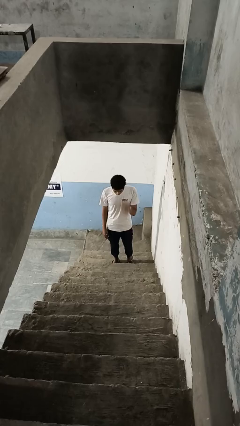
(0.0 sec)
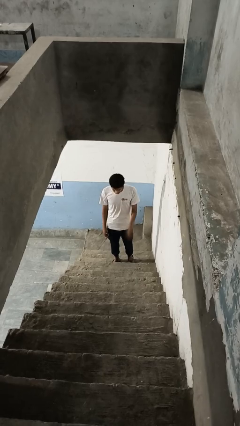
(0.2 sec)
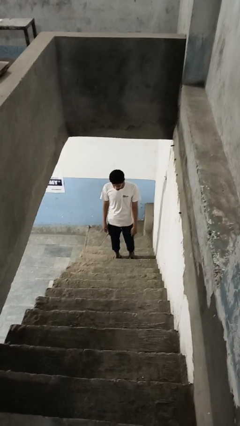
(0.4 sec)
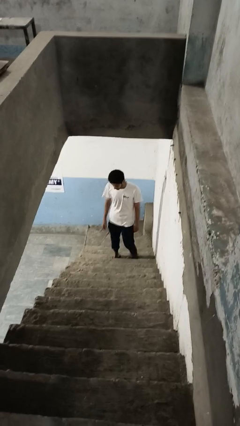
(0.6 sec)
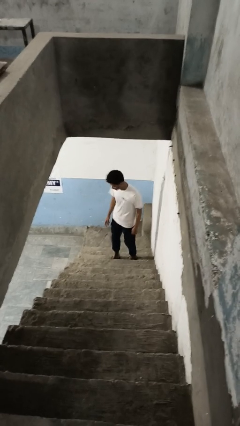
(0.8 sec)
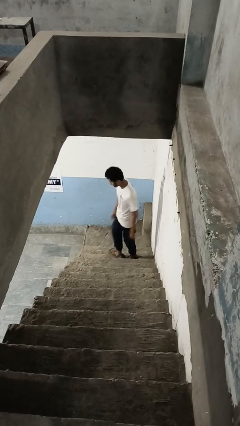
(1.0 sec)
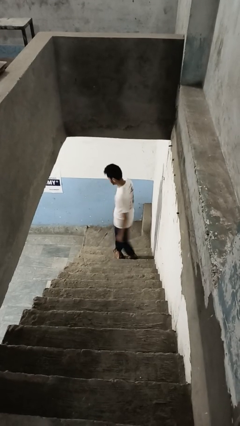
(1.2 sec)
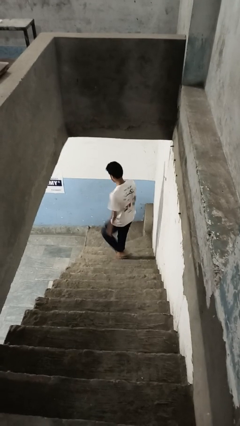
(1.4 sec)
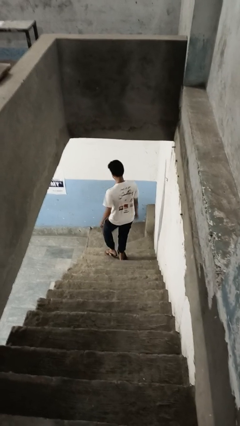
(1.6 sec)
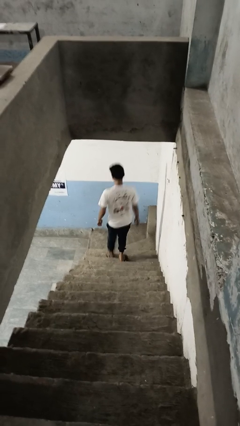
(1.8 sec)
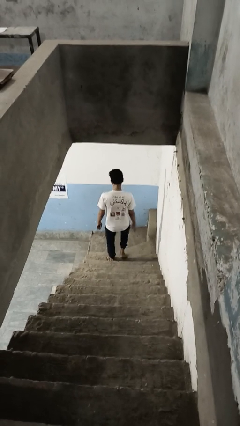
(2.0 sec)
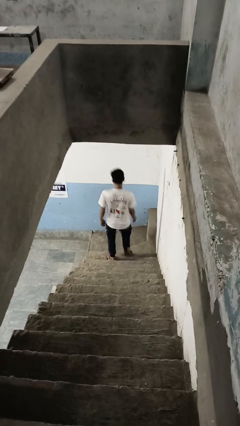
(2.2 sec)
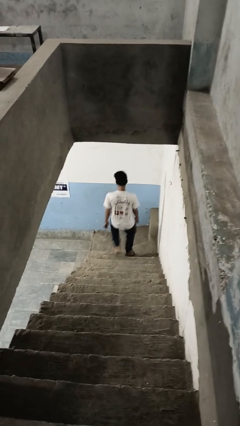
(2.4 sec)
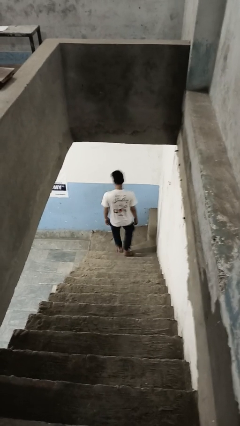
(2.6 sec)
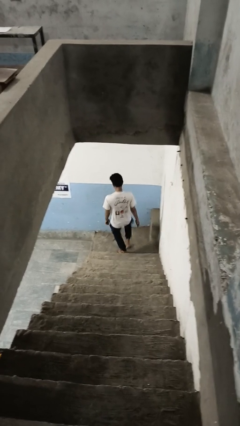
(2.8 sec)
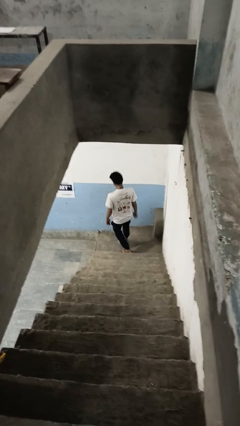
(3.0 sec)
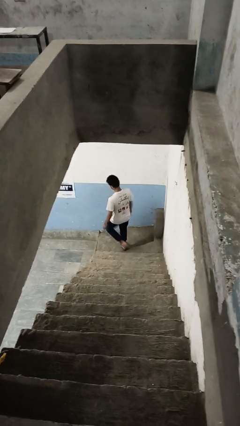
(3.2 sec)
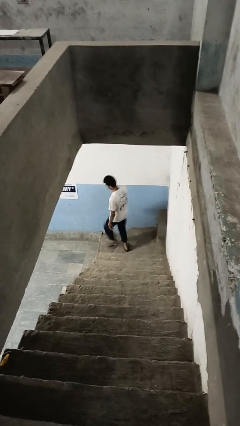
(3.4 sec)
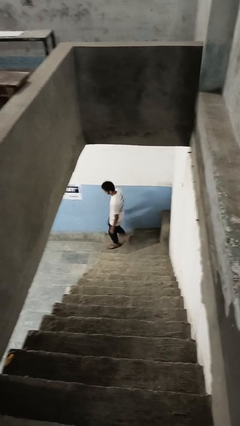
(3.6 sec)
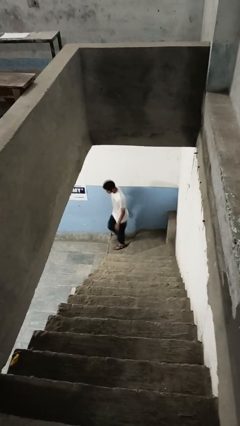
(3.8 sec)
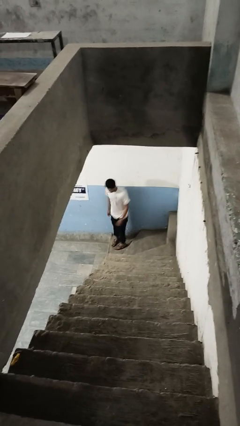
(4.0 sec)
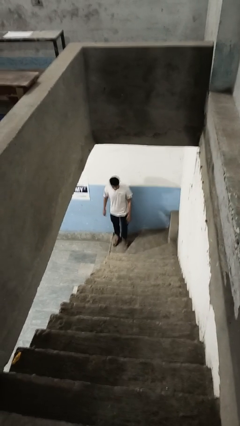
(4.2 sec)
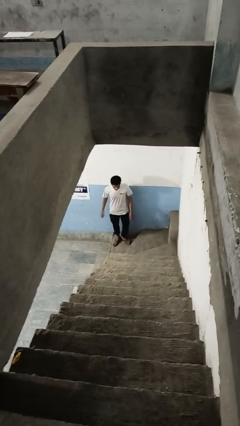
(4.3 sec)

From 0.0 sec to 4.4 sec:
person climbs down stairs

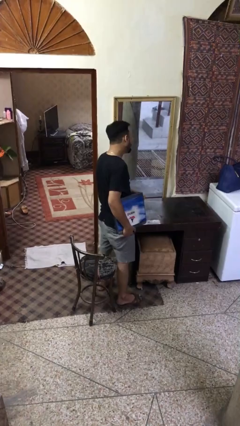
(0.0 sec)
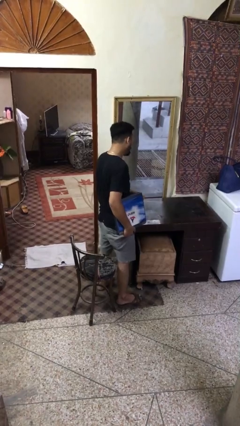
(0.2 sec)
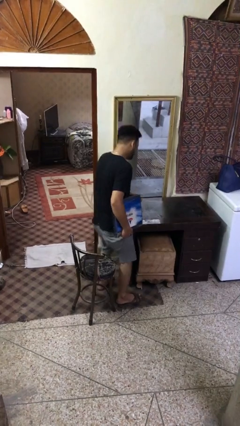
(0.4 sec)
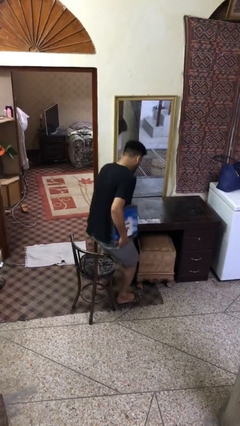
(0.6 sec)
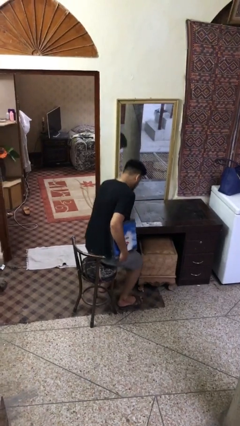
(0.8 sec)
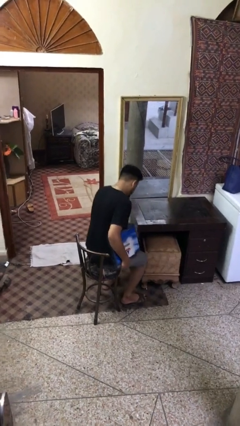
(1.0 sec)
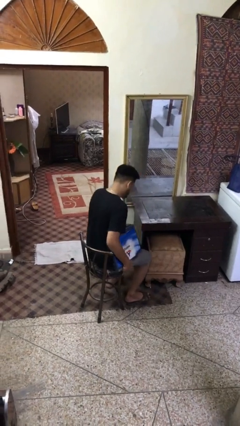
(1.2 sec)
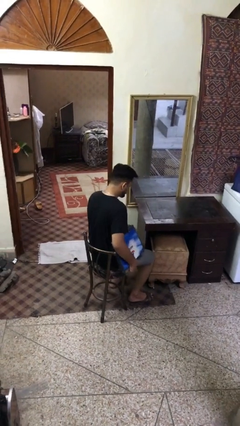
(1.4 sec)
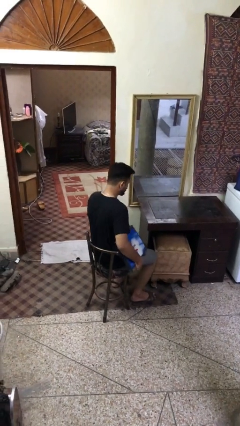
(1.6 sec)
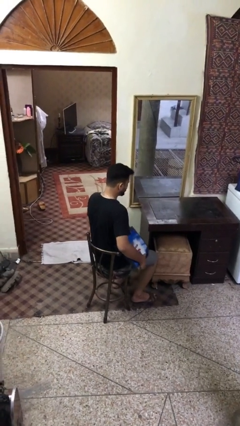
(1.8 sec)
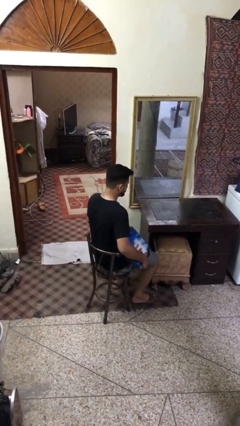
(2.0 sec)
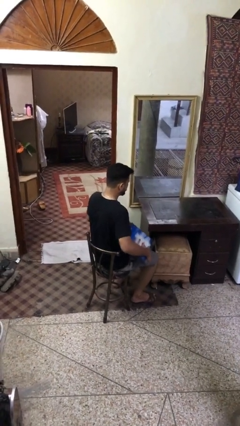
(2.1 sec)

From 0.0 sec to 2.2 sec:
person sits down

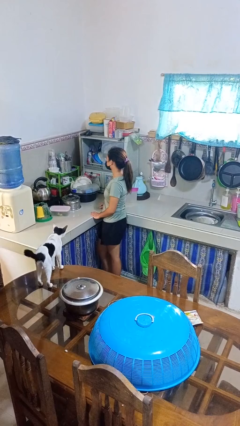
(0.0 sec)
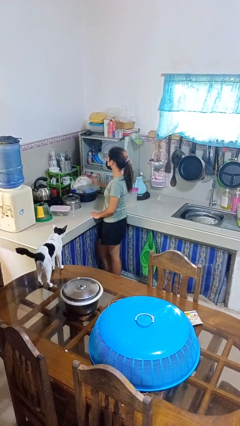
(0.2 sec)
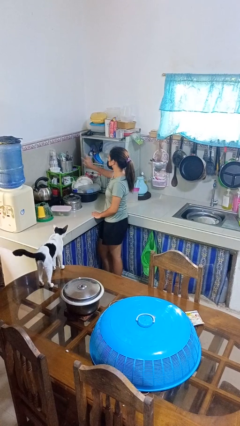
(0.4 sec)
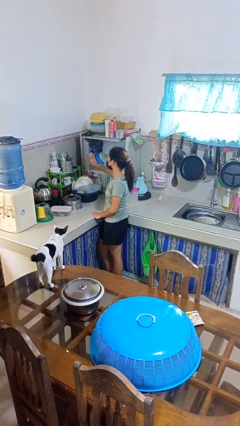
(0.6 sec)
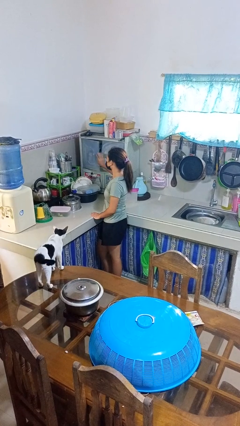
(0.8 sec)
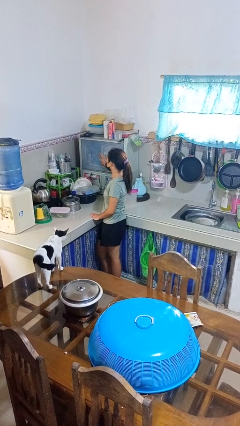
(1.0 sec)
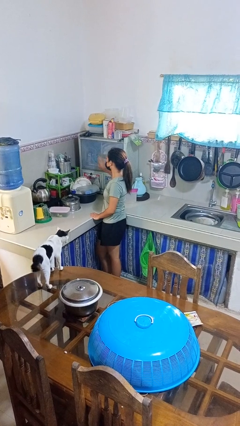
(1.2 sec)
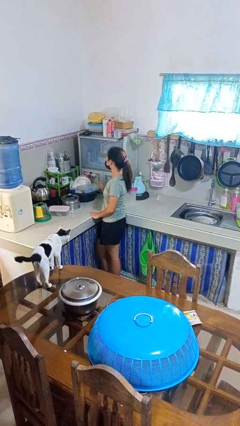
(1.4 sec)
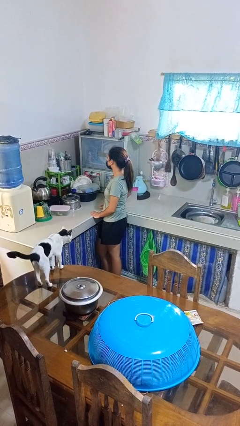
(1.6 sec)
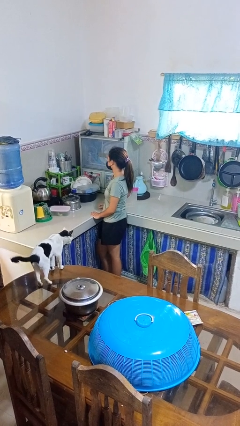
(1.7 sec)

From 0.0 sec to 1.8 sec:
person closes kitchen drawer

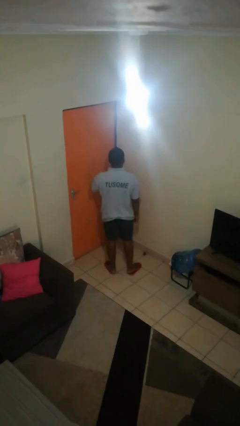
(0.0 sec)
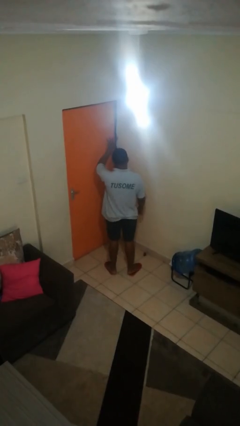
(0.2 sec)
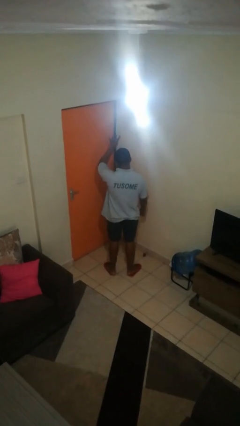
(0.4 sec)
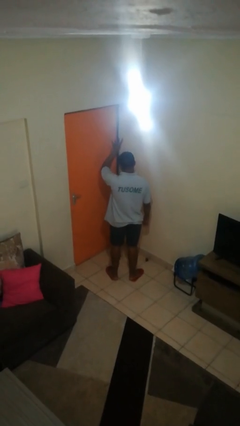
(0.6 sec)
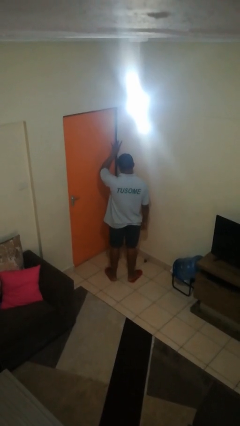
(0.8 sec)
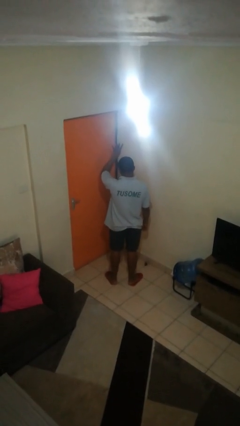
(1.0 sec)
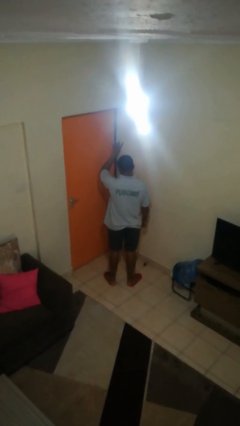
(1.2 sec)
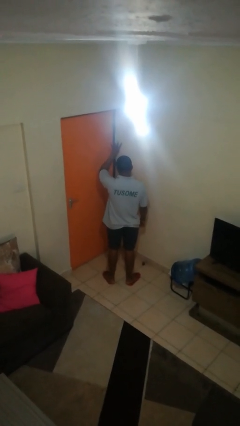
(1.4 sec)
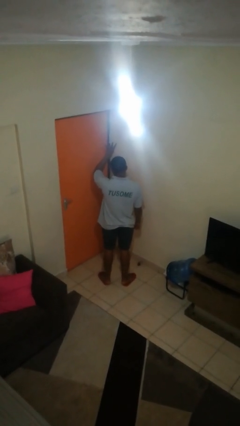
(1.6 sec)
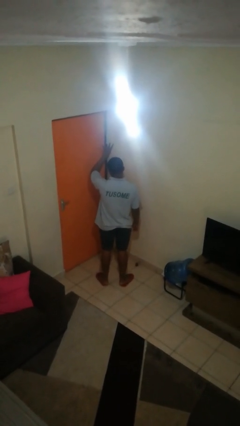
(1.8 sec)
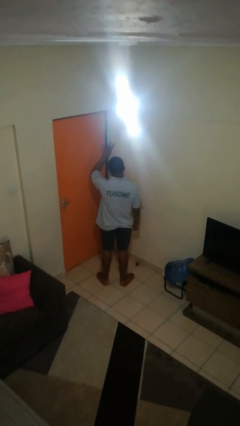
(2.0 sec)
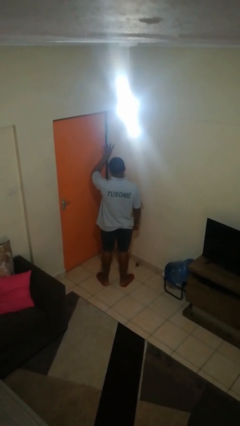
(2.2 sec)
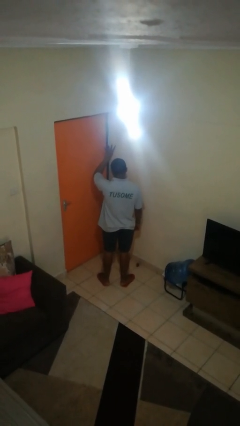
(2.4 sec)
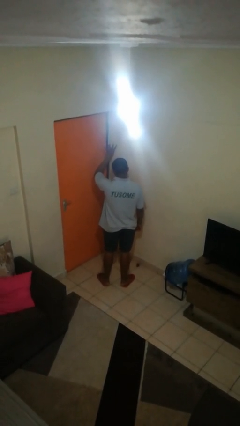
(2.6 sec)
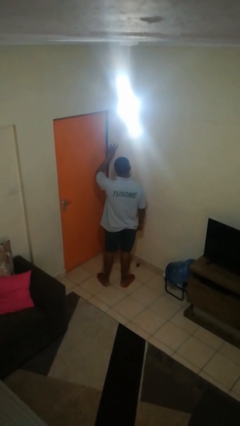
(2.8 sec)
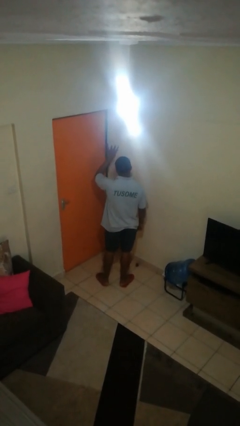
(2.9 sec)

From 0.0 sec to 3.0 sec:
person gestures number four

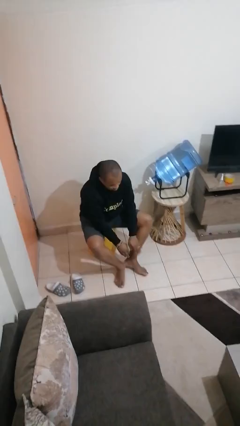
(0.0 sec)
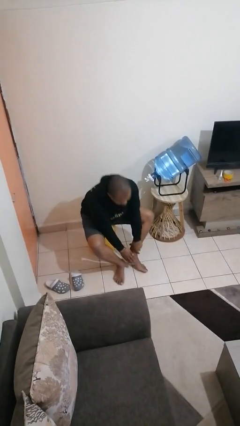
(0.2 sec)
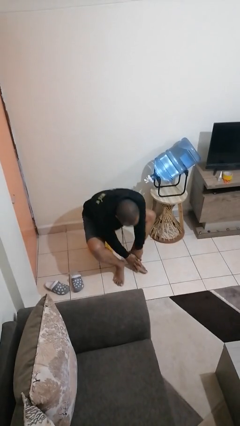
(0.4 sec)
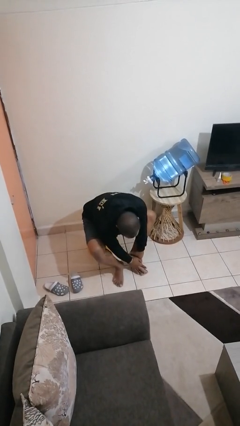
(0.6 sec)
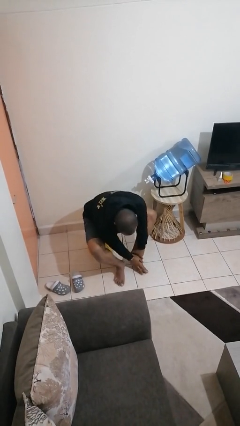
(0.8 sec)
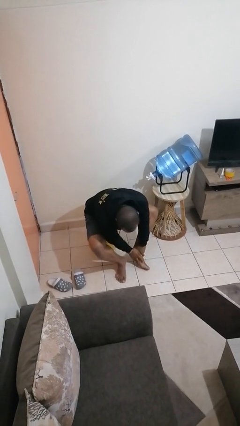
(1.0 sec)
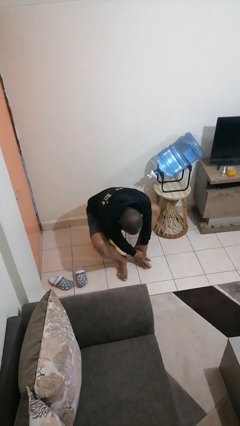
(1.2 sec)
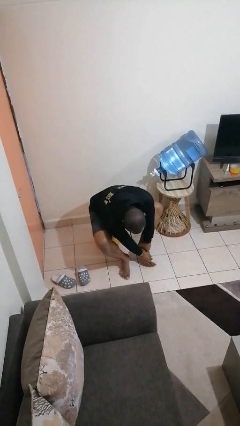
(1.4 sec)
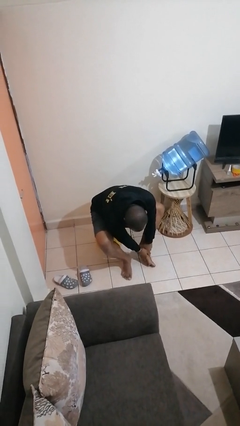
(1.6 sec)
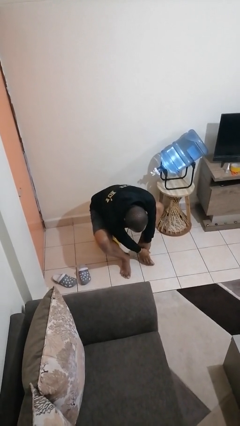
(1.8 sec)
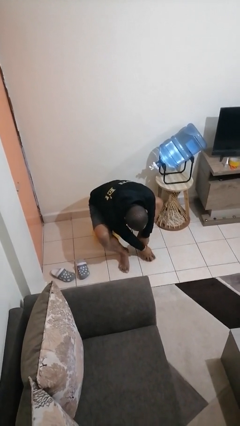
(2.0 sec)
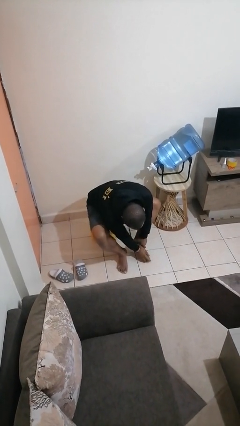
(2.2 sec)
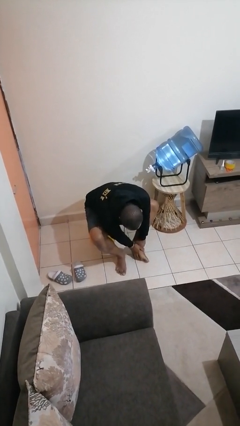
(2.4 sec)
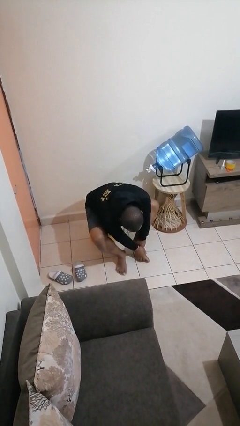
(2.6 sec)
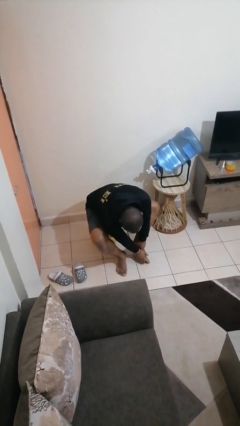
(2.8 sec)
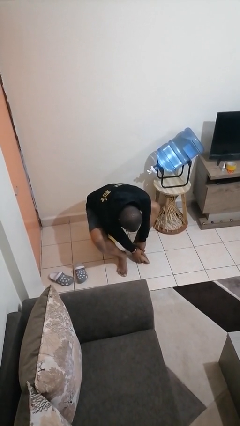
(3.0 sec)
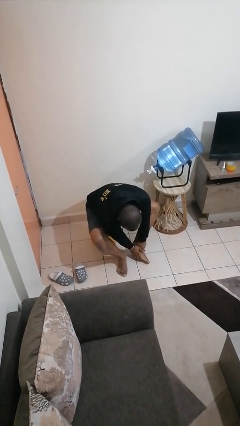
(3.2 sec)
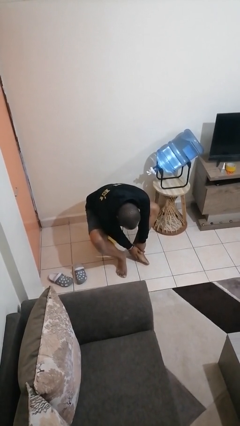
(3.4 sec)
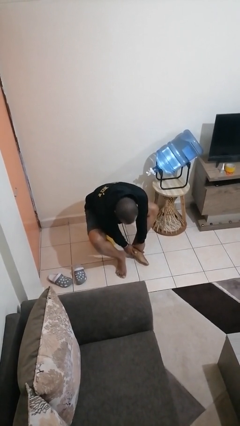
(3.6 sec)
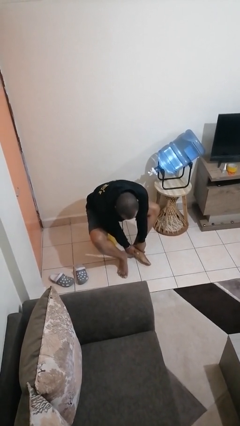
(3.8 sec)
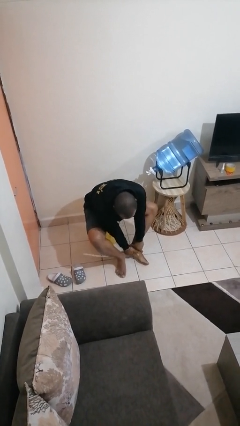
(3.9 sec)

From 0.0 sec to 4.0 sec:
person rubs foot

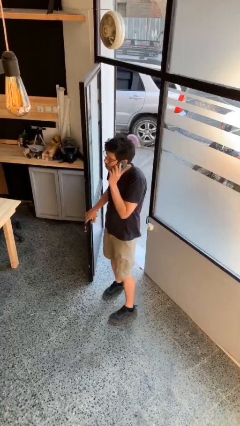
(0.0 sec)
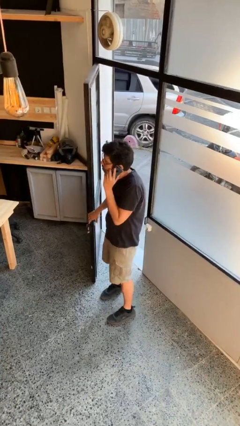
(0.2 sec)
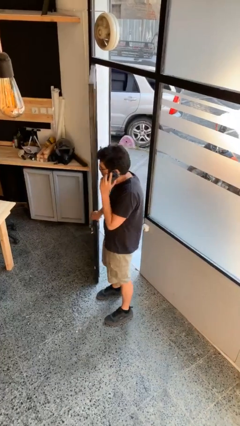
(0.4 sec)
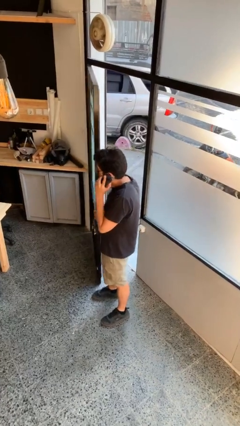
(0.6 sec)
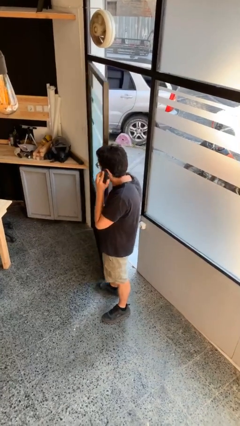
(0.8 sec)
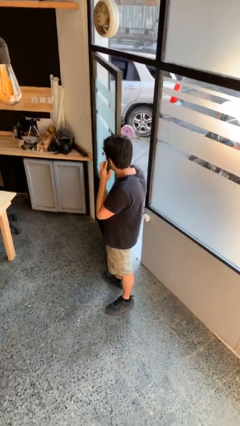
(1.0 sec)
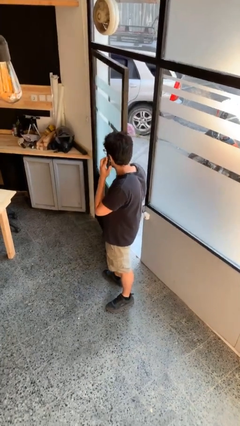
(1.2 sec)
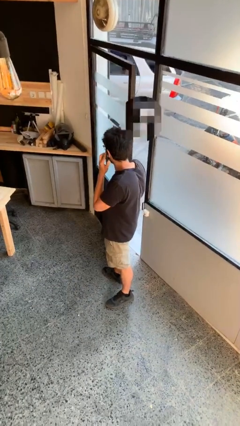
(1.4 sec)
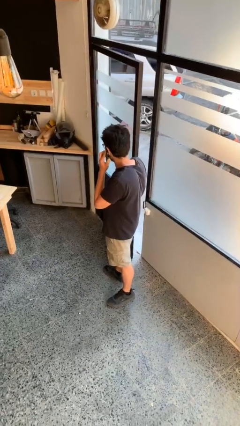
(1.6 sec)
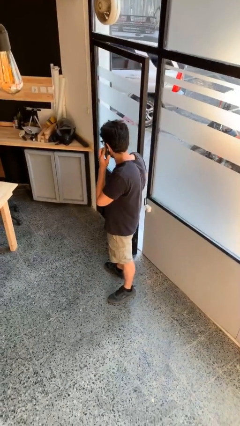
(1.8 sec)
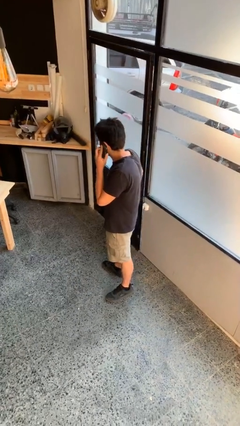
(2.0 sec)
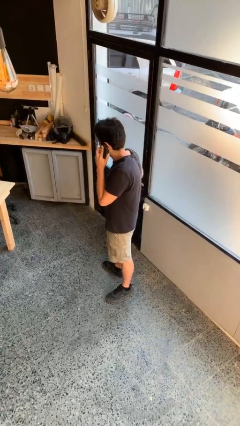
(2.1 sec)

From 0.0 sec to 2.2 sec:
person closes facility door
